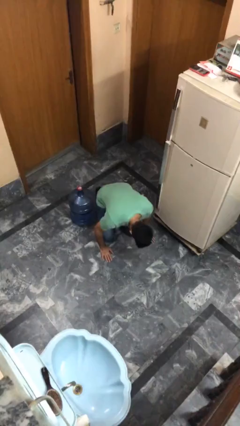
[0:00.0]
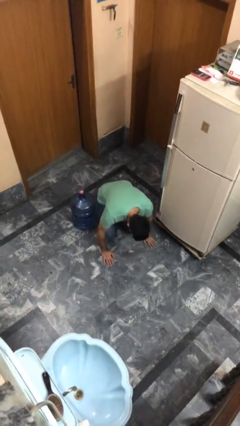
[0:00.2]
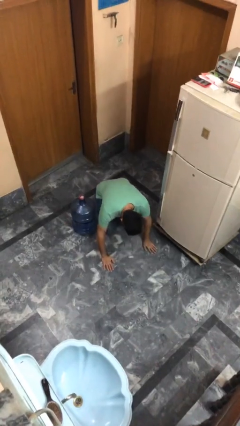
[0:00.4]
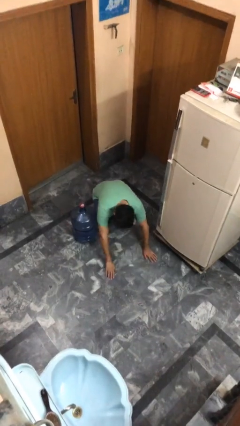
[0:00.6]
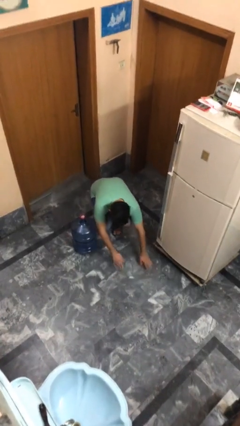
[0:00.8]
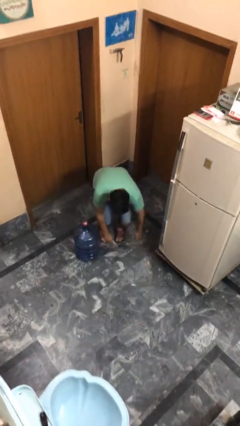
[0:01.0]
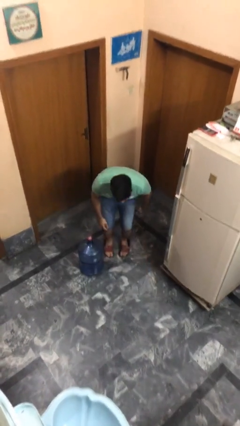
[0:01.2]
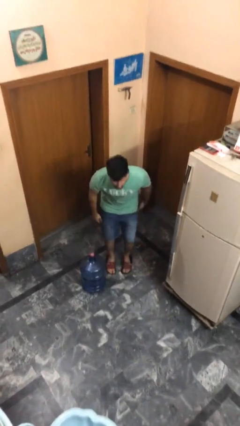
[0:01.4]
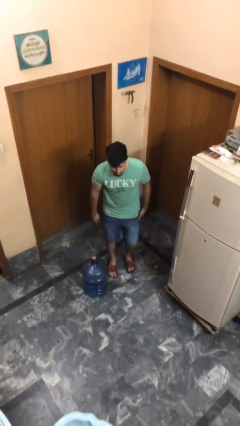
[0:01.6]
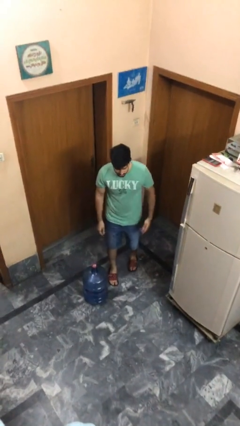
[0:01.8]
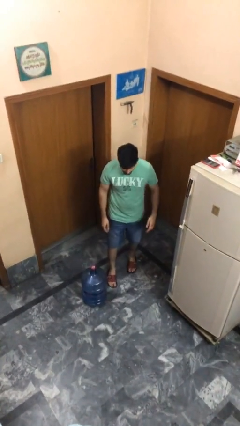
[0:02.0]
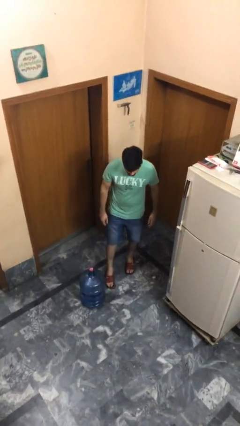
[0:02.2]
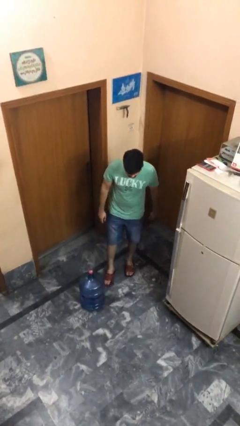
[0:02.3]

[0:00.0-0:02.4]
person stands up from floor

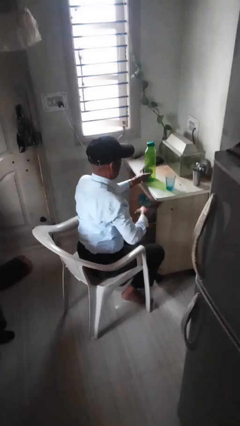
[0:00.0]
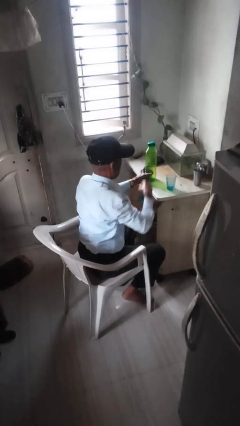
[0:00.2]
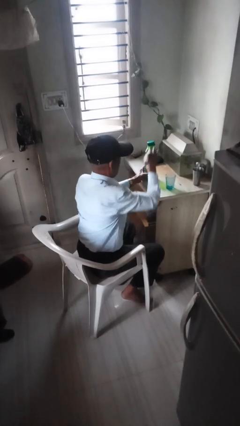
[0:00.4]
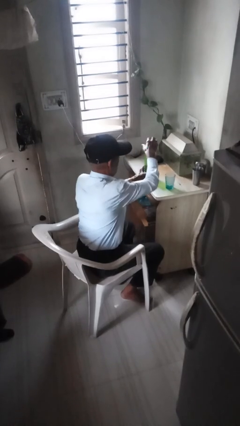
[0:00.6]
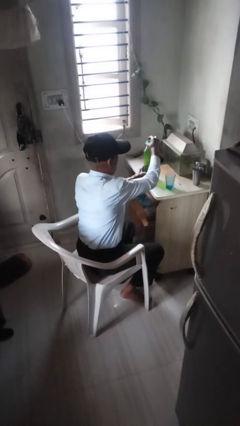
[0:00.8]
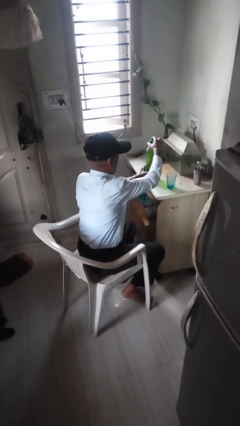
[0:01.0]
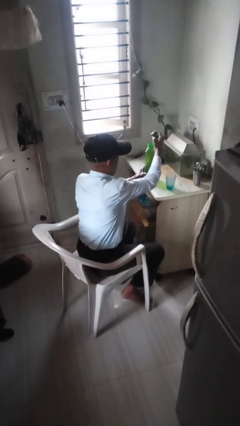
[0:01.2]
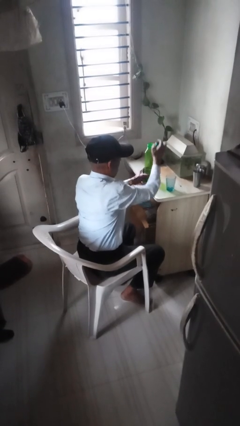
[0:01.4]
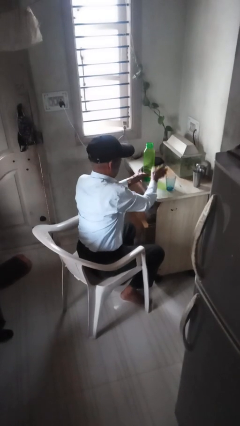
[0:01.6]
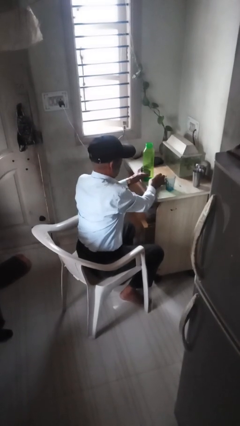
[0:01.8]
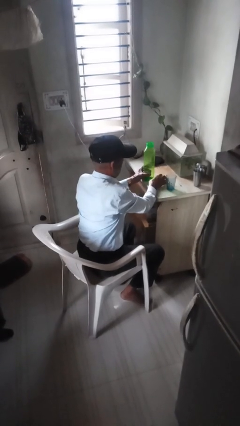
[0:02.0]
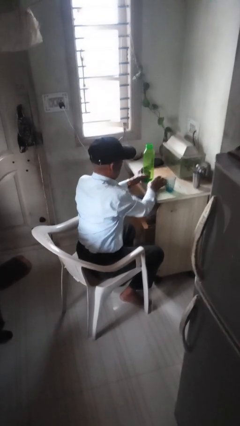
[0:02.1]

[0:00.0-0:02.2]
person unscrews lid from bottle

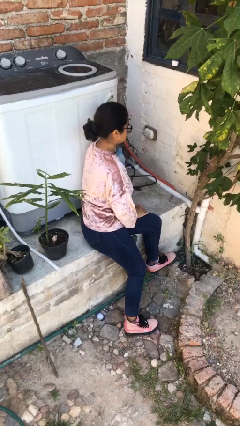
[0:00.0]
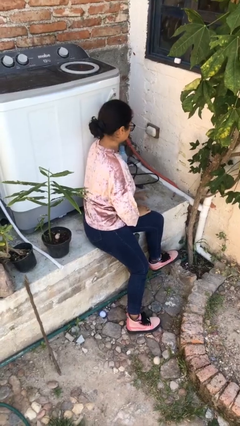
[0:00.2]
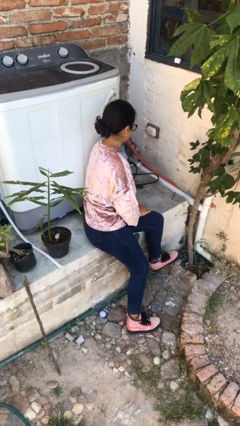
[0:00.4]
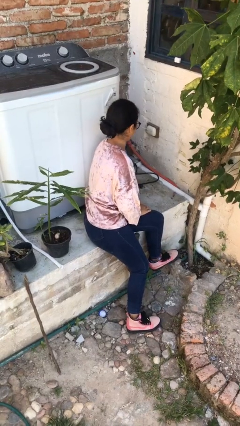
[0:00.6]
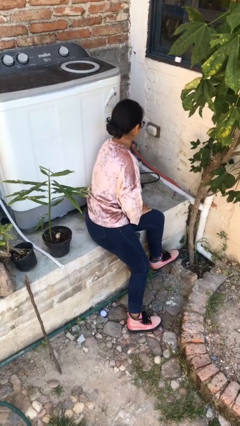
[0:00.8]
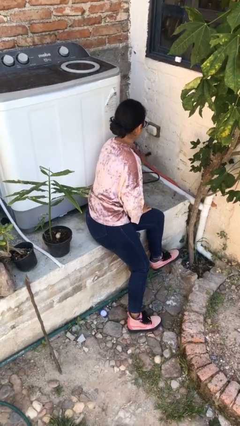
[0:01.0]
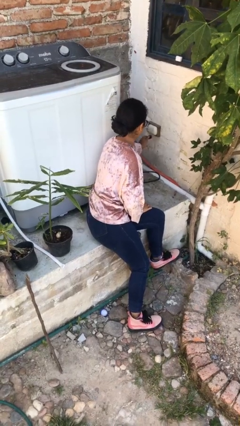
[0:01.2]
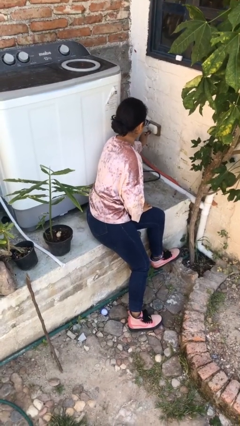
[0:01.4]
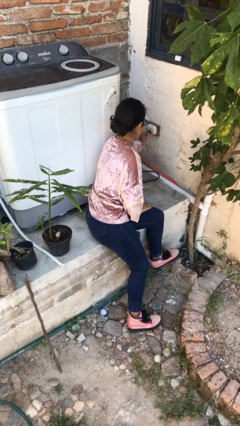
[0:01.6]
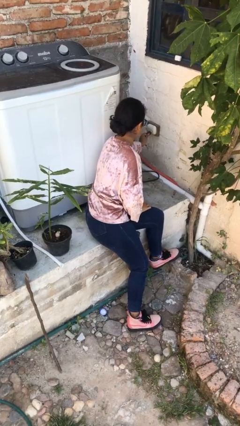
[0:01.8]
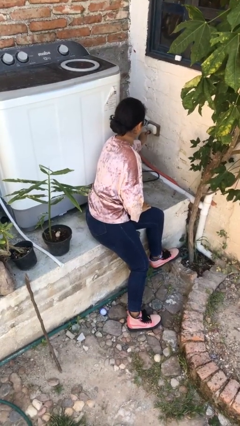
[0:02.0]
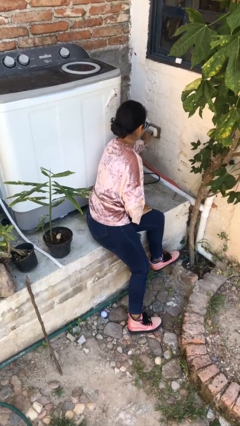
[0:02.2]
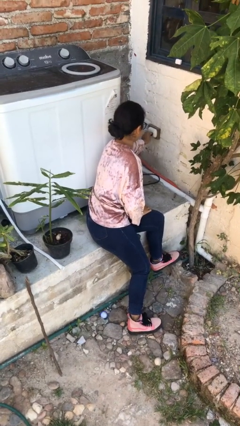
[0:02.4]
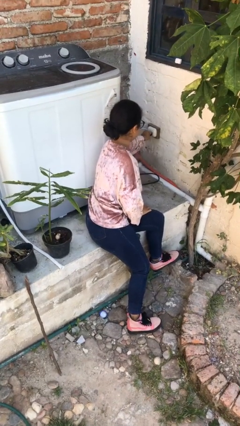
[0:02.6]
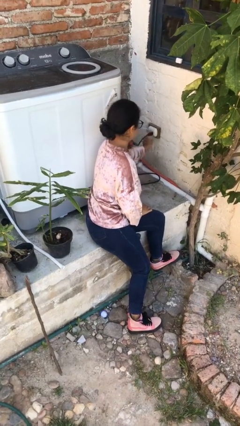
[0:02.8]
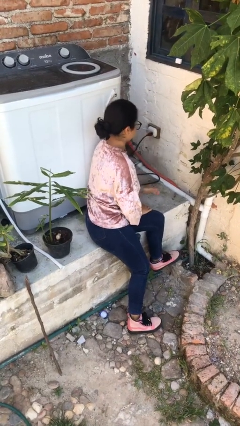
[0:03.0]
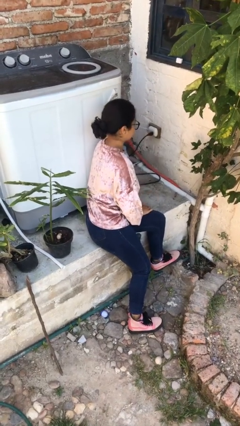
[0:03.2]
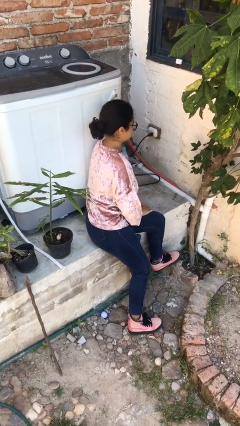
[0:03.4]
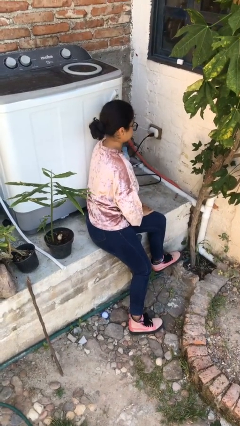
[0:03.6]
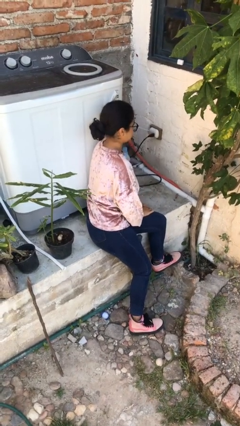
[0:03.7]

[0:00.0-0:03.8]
person plugs into electrical socket

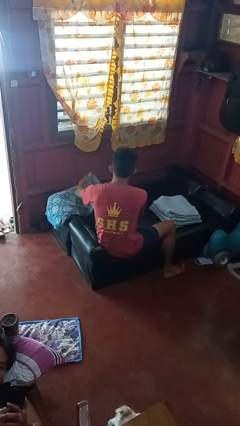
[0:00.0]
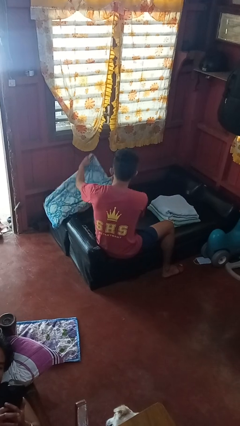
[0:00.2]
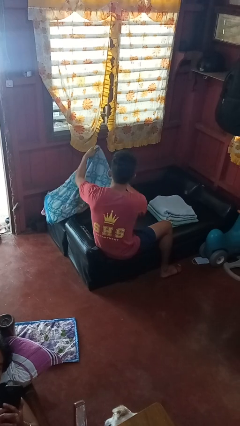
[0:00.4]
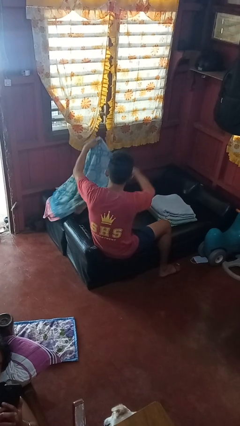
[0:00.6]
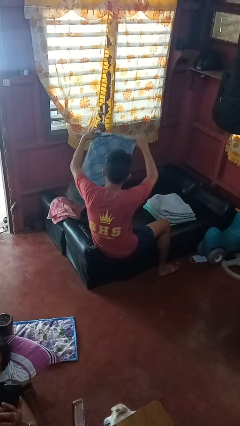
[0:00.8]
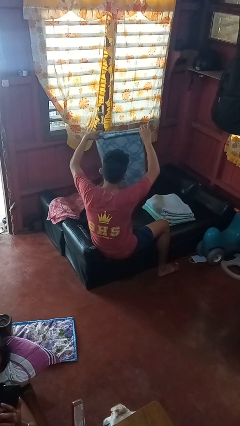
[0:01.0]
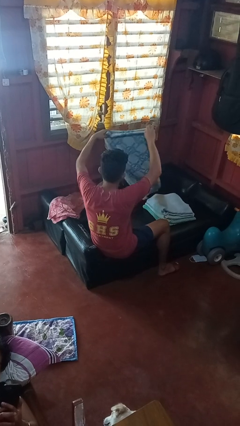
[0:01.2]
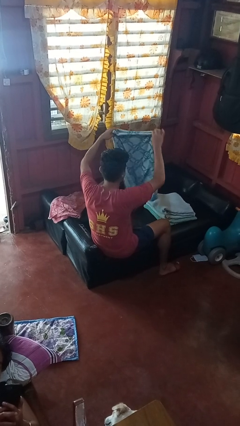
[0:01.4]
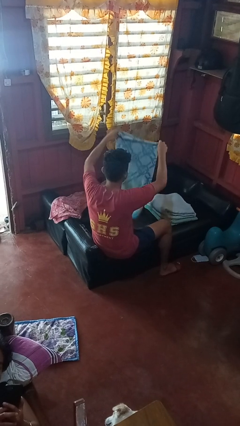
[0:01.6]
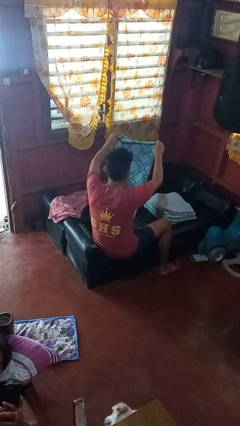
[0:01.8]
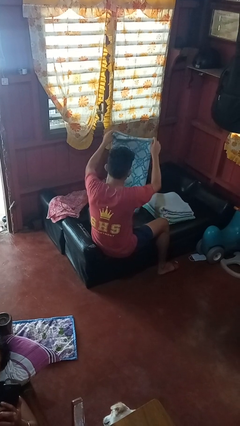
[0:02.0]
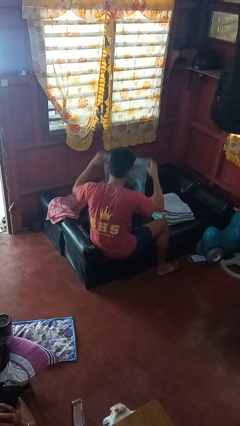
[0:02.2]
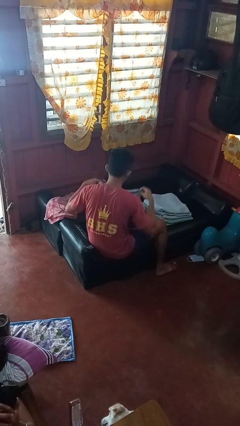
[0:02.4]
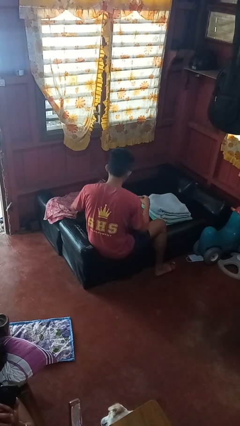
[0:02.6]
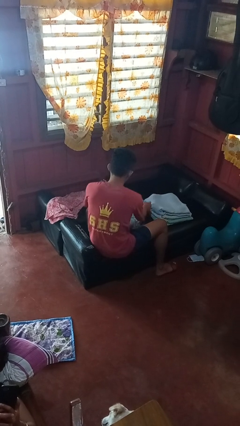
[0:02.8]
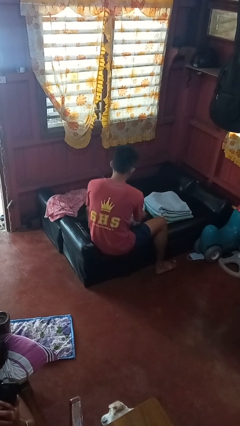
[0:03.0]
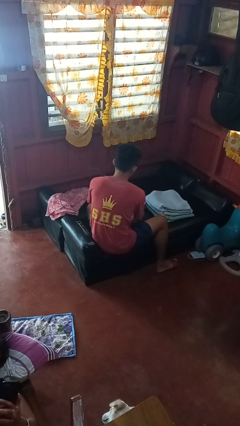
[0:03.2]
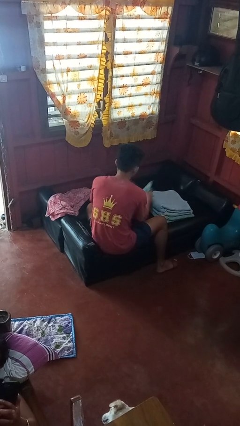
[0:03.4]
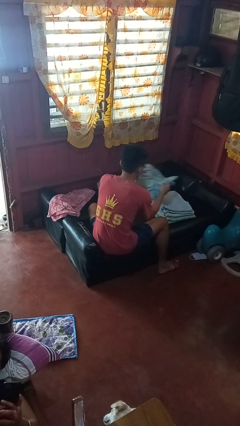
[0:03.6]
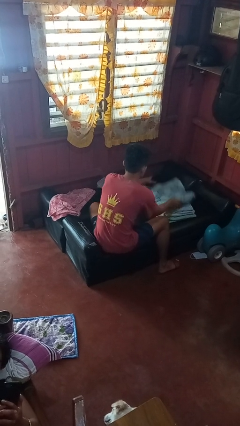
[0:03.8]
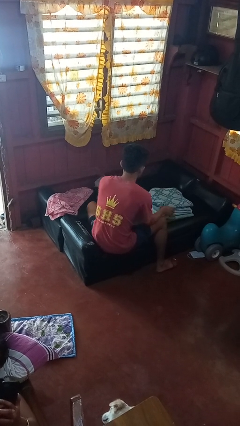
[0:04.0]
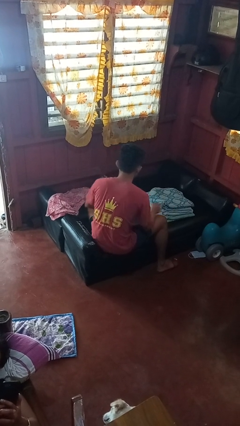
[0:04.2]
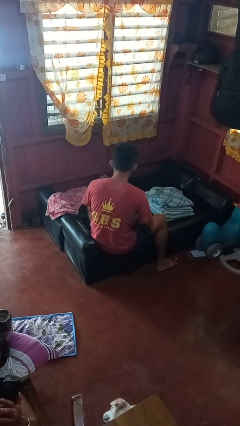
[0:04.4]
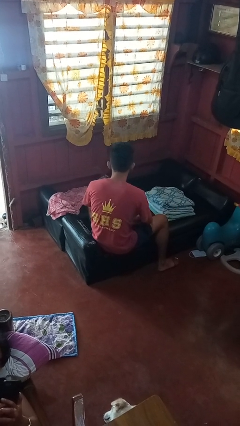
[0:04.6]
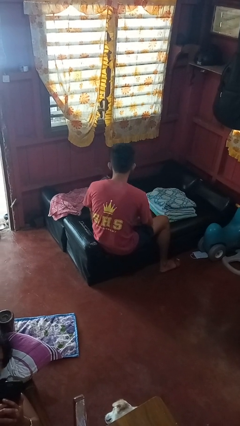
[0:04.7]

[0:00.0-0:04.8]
person folds towel

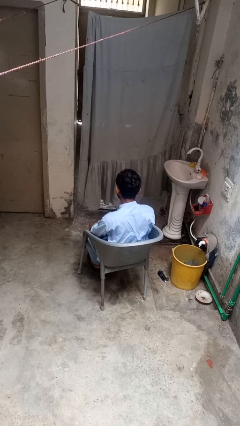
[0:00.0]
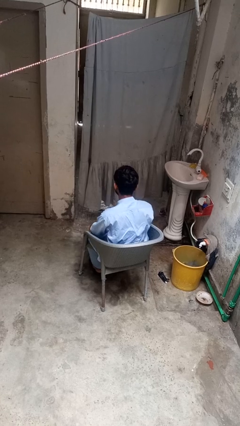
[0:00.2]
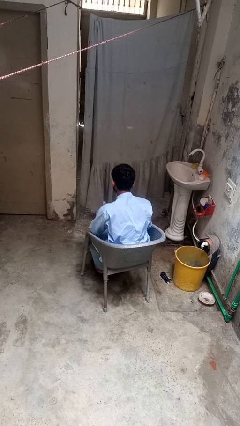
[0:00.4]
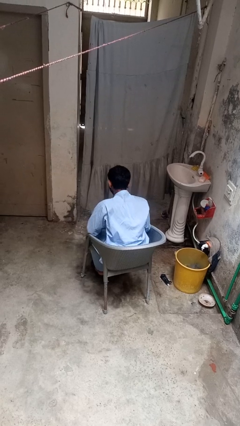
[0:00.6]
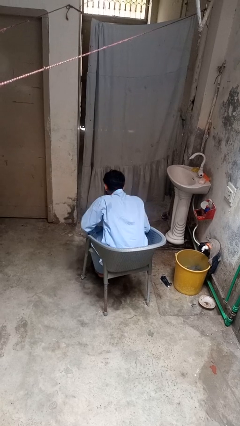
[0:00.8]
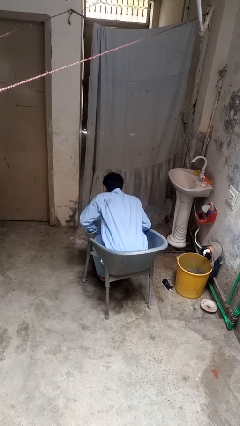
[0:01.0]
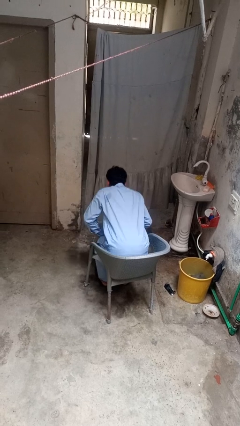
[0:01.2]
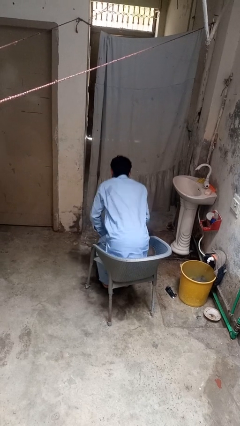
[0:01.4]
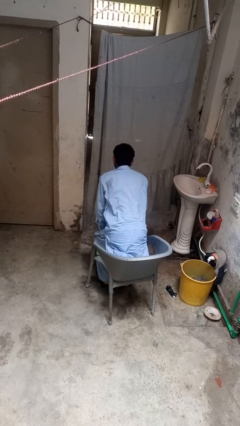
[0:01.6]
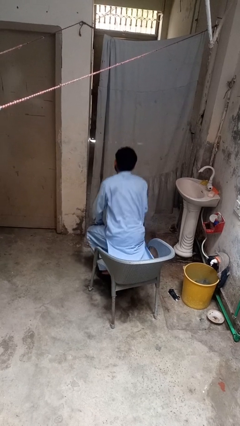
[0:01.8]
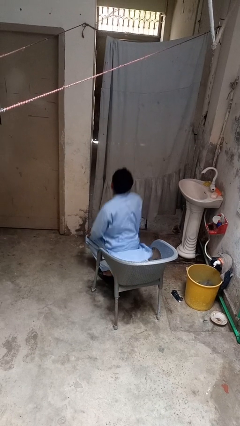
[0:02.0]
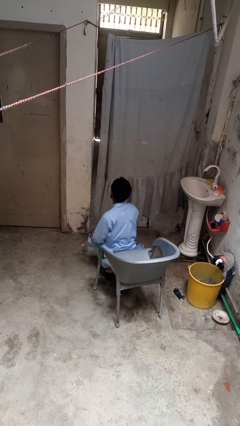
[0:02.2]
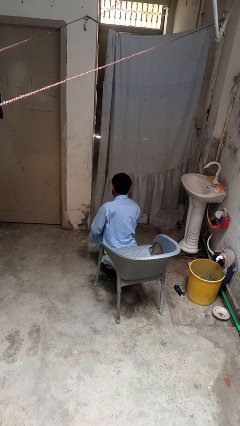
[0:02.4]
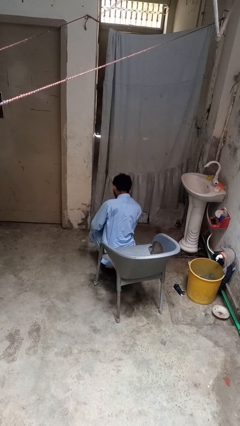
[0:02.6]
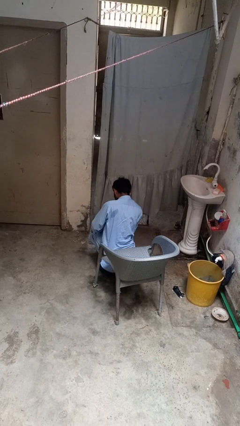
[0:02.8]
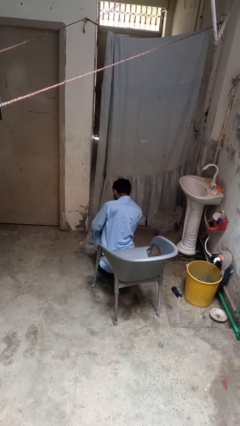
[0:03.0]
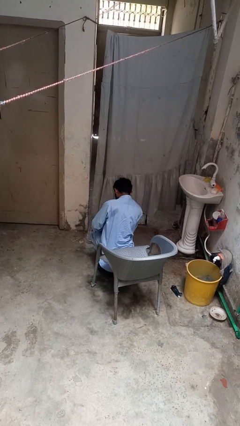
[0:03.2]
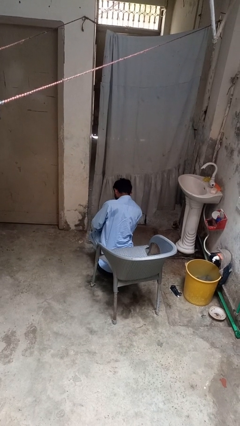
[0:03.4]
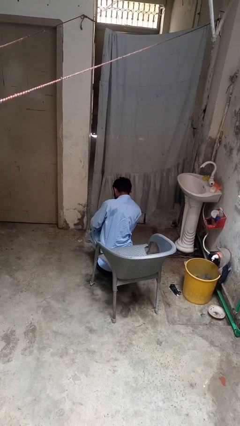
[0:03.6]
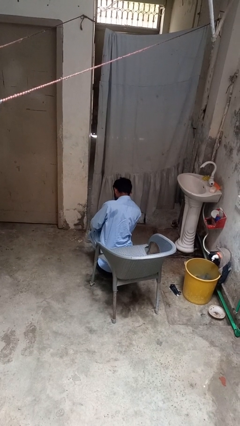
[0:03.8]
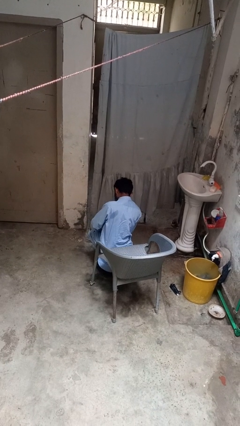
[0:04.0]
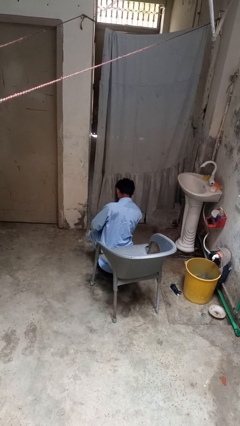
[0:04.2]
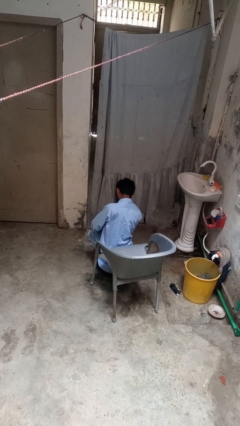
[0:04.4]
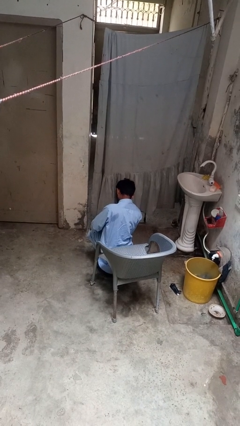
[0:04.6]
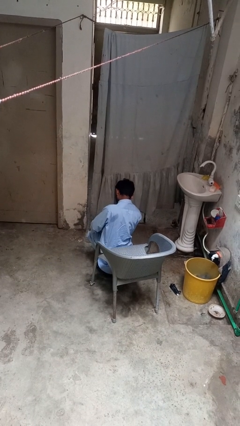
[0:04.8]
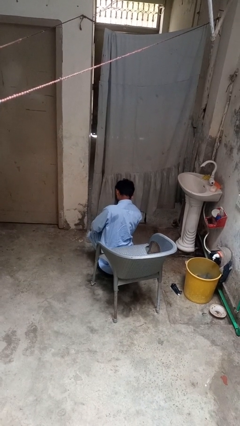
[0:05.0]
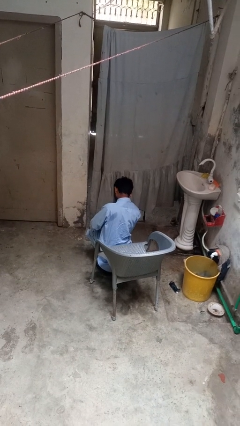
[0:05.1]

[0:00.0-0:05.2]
person falls from chair
